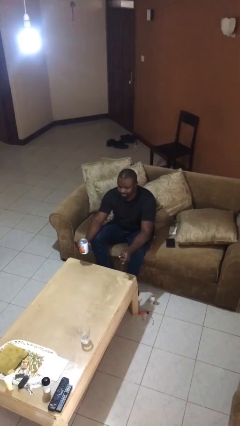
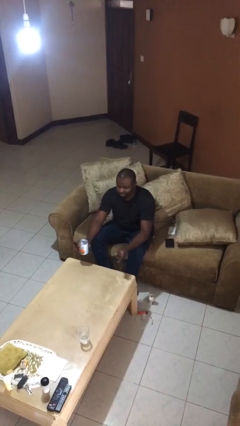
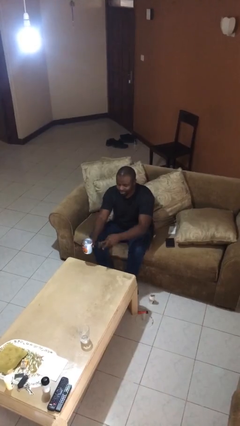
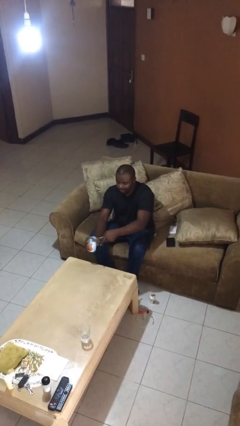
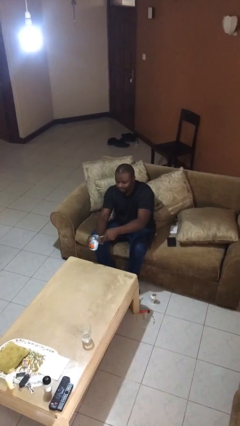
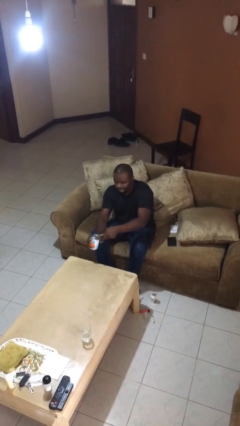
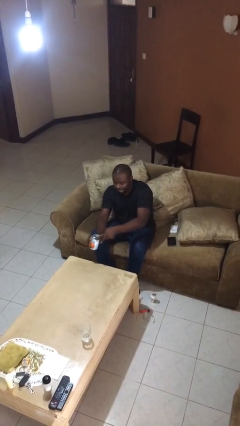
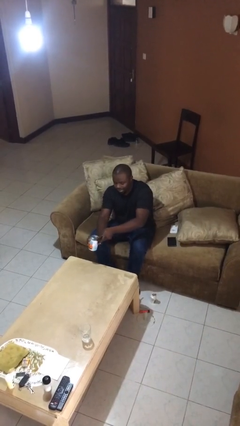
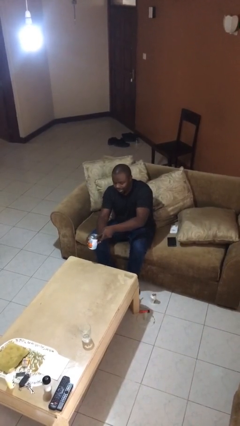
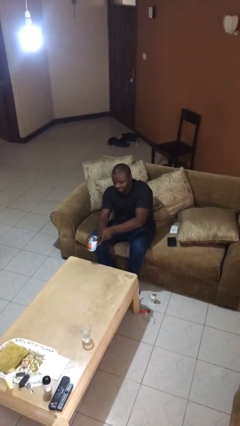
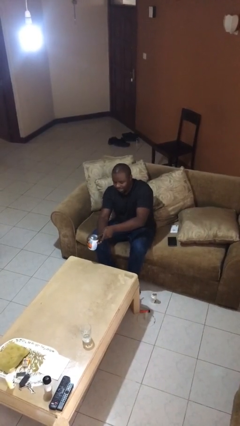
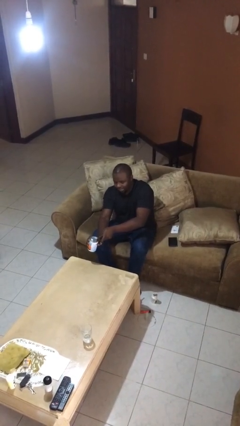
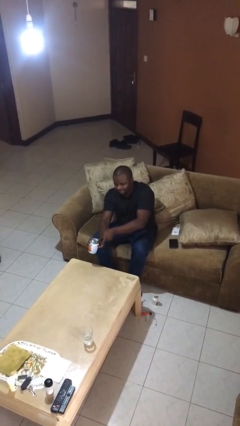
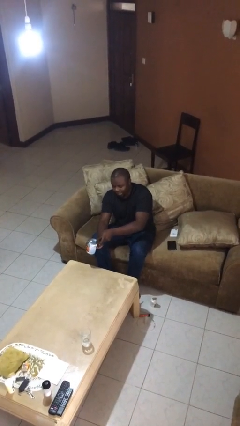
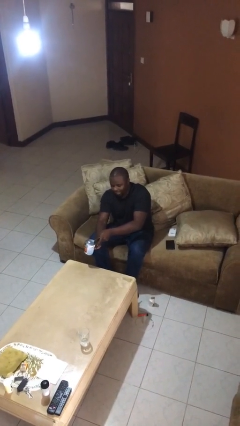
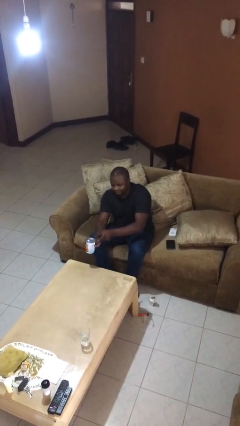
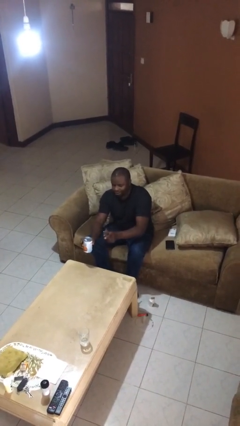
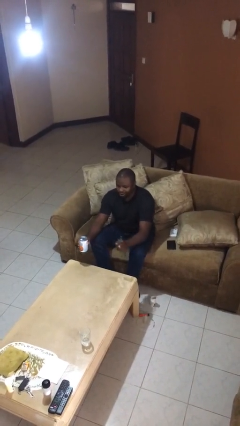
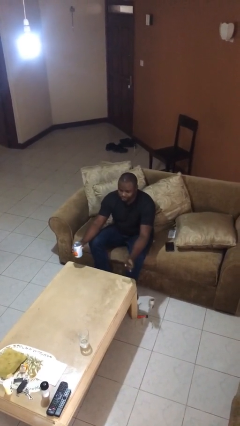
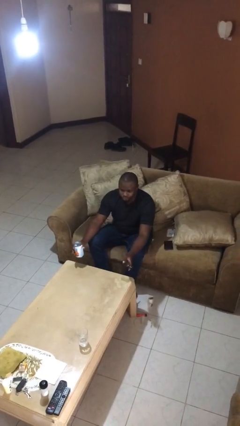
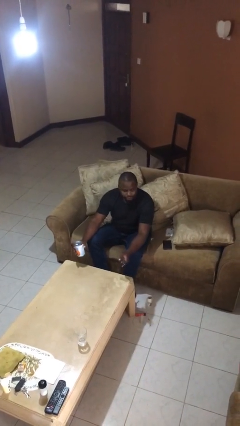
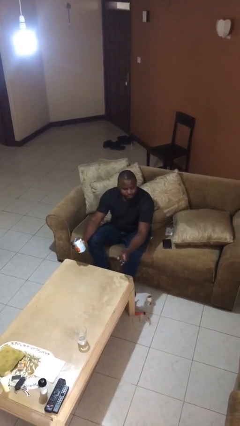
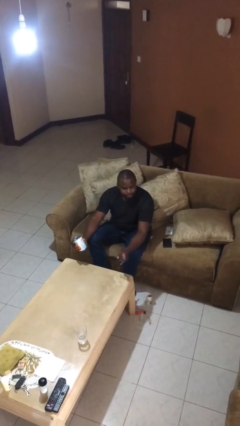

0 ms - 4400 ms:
person opens can with can opener

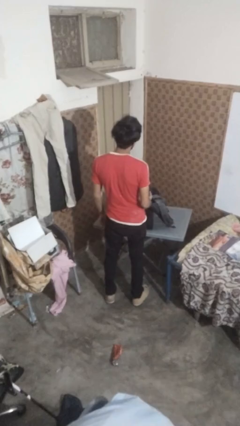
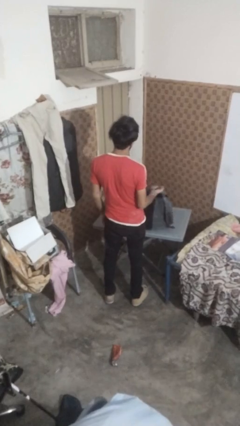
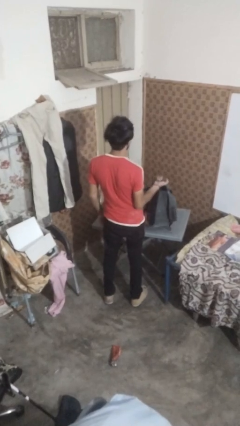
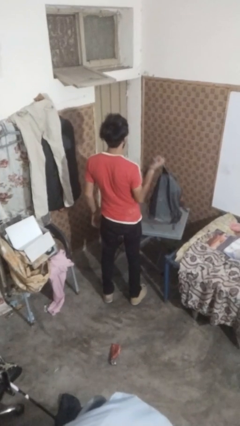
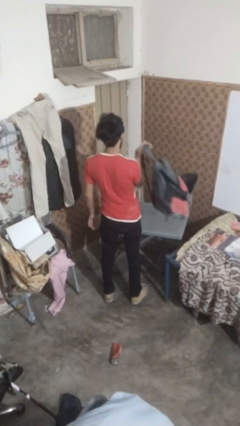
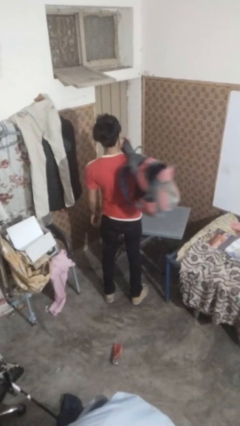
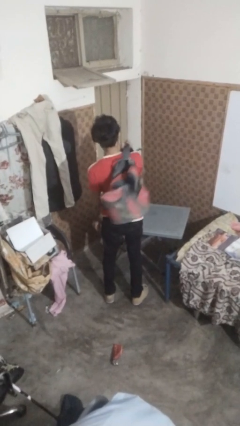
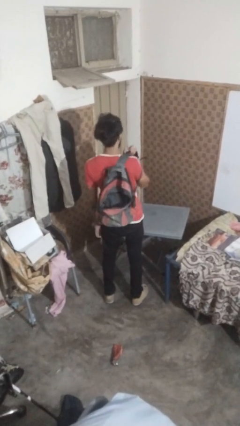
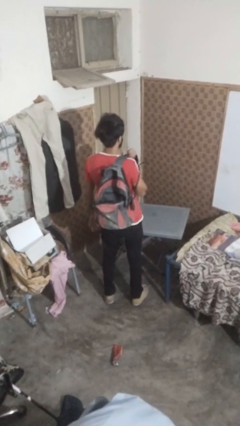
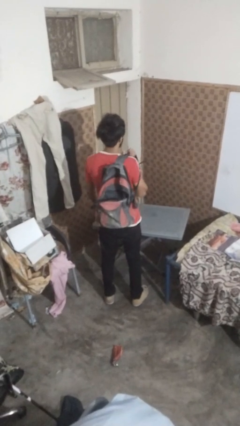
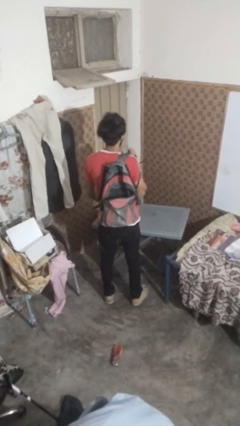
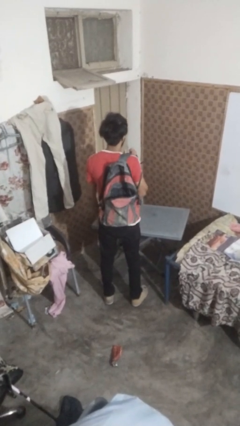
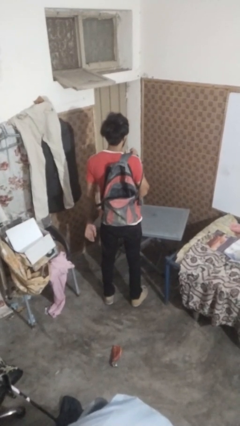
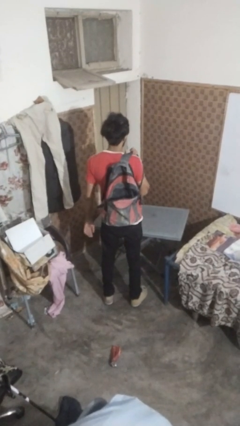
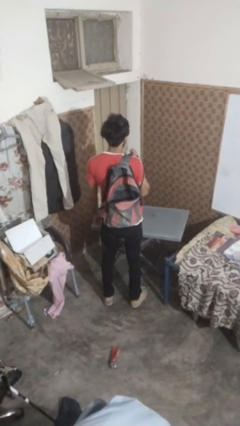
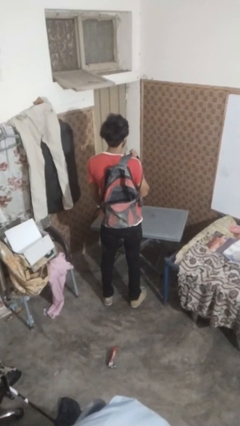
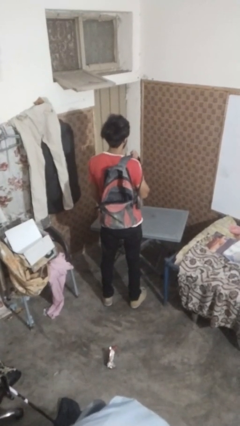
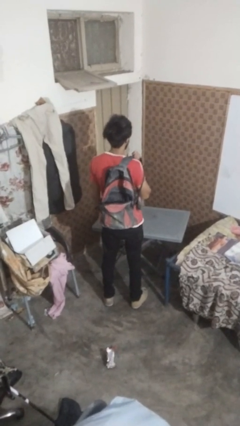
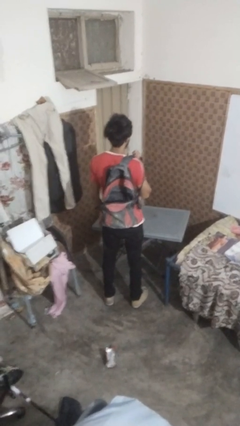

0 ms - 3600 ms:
person puts on backpack

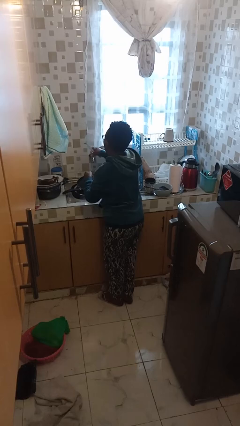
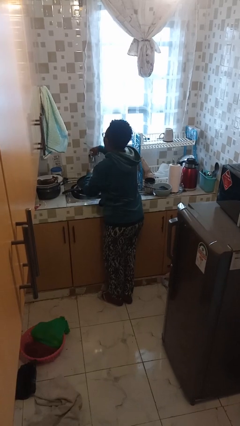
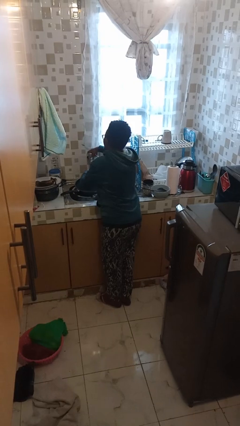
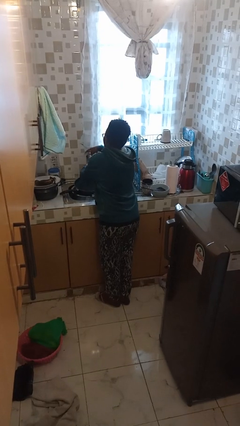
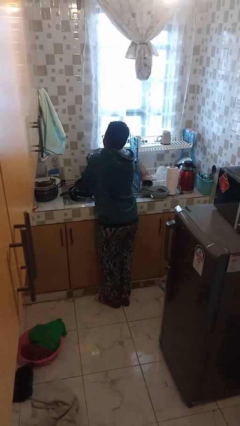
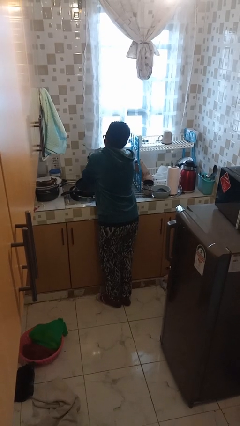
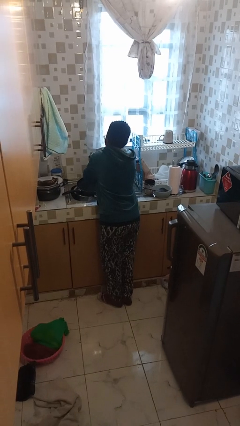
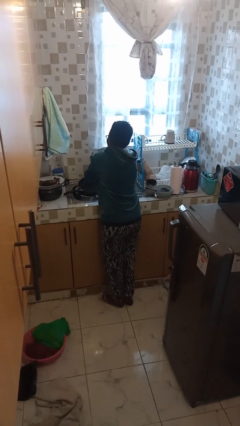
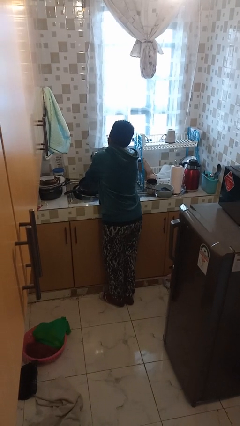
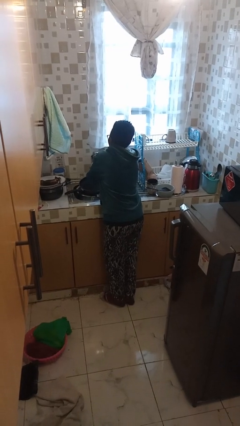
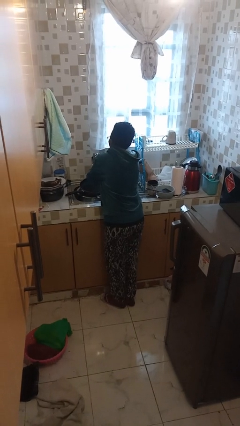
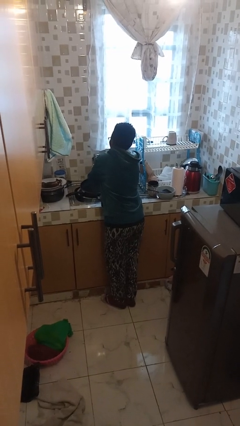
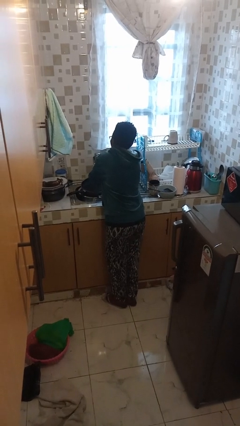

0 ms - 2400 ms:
person washes hands

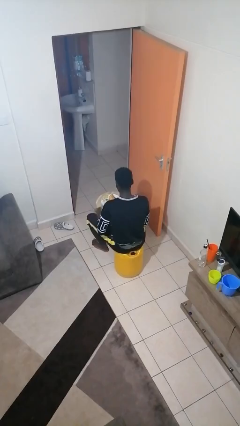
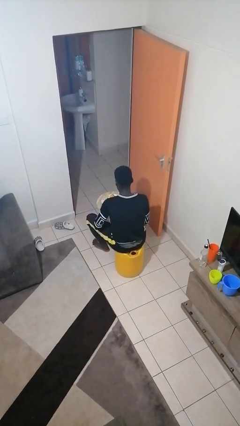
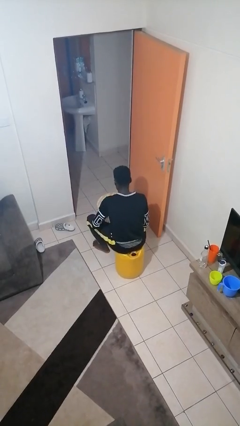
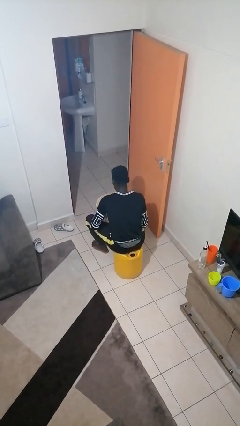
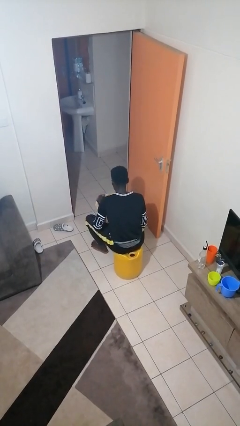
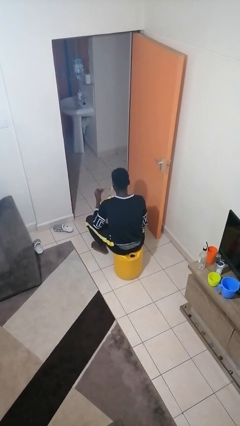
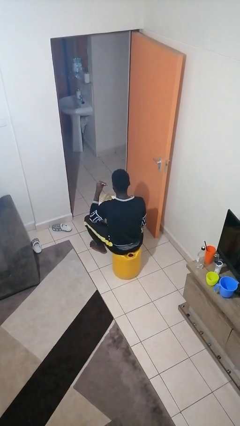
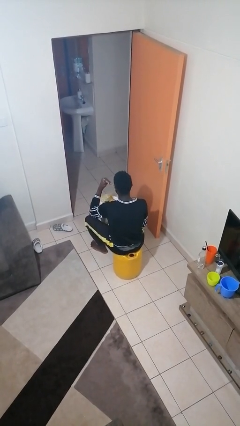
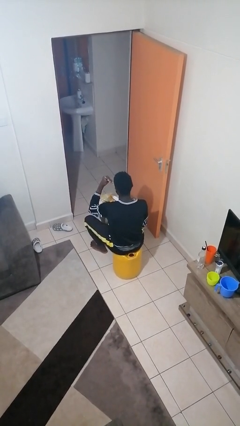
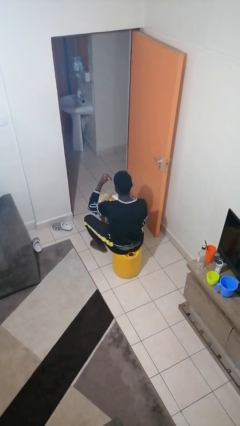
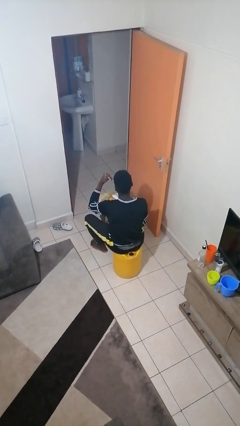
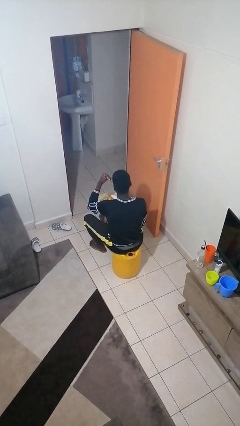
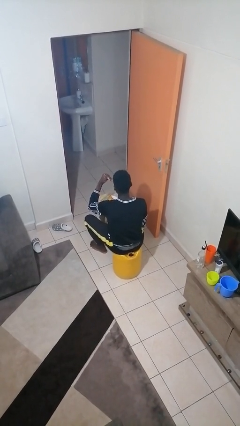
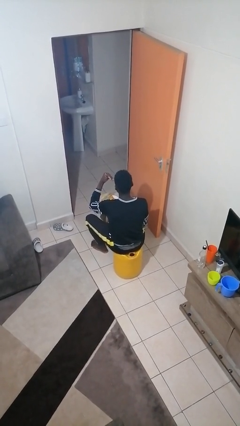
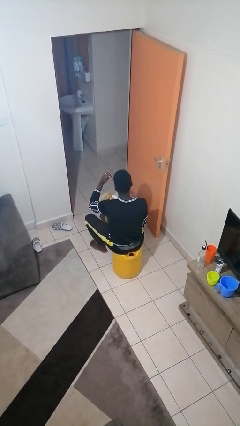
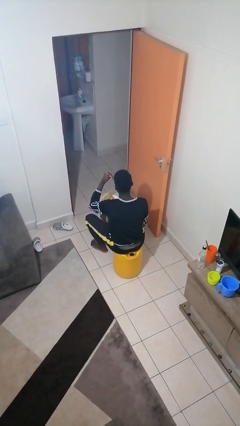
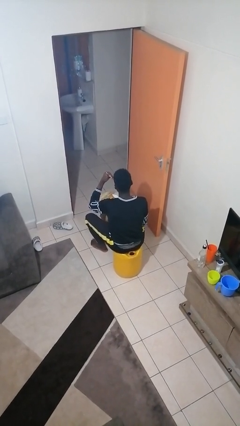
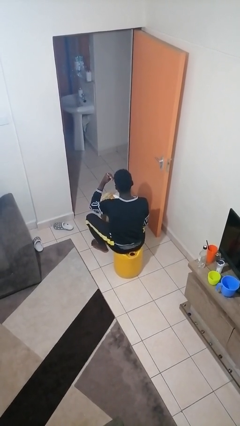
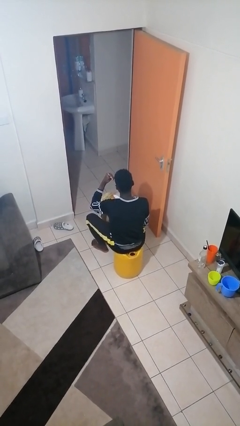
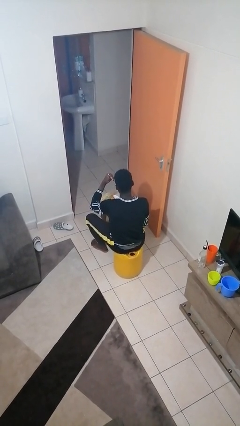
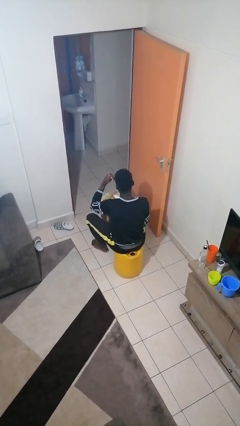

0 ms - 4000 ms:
person eats with utensil

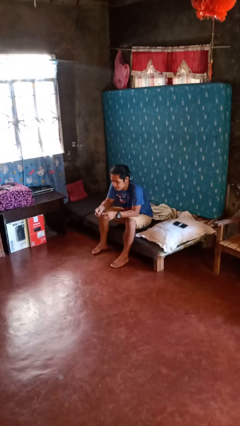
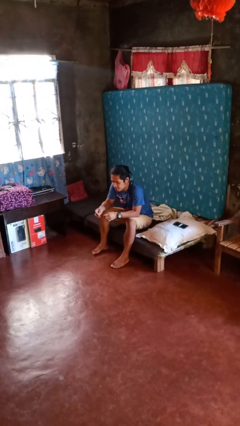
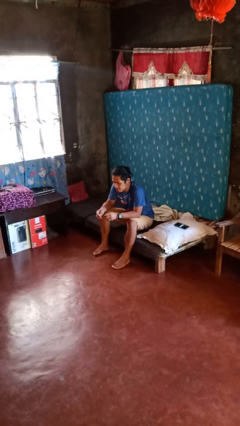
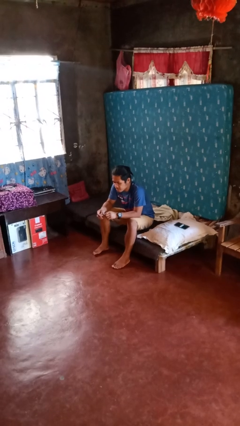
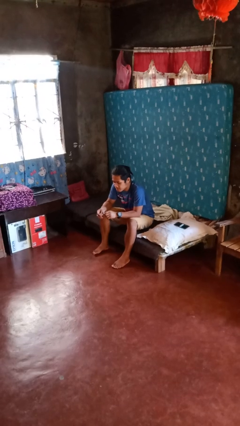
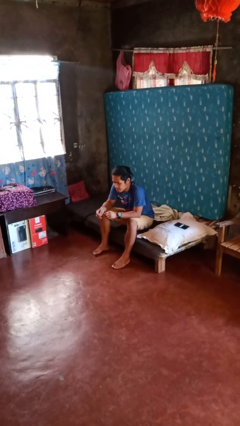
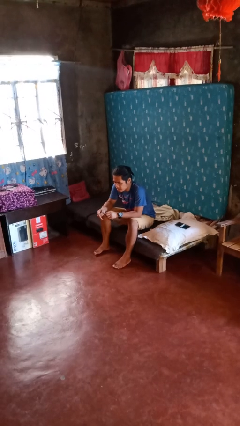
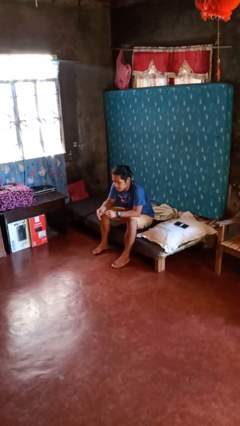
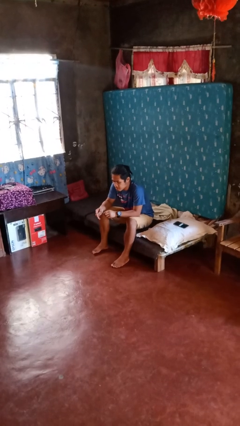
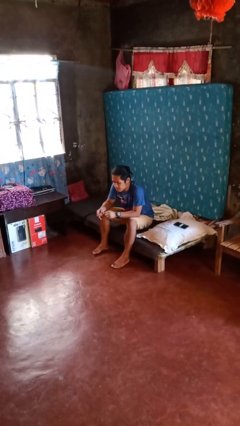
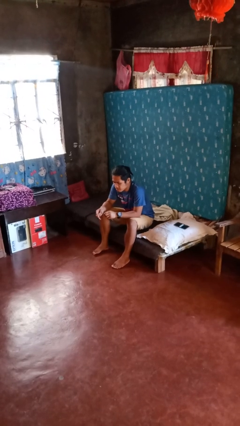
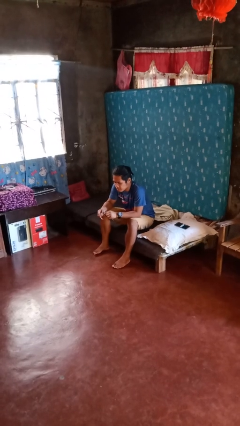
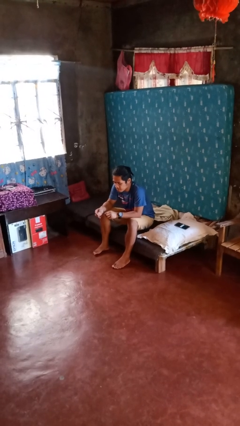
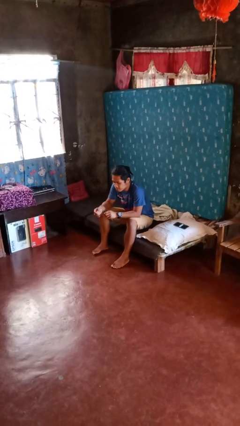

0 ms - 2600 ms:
person files fingernails

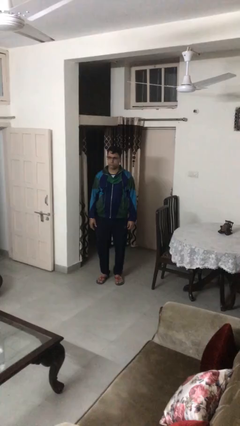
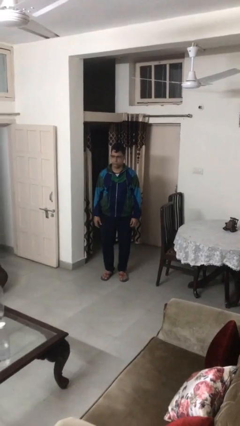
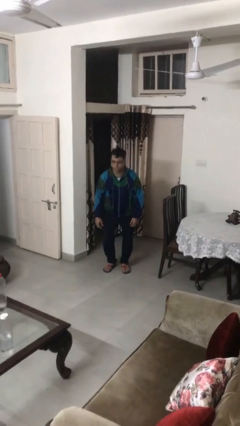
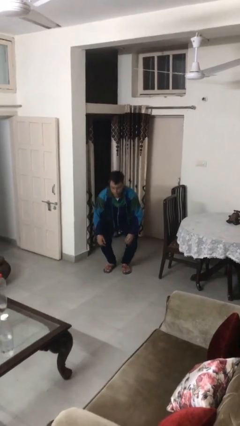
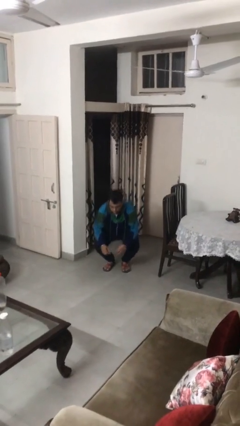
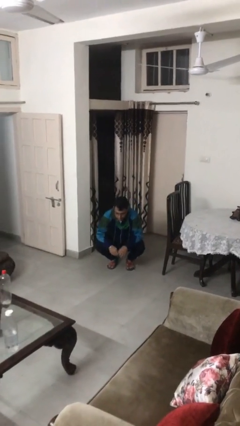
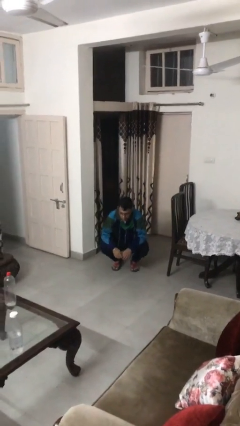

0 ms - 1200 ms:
person sits down
